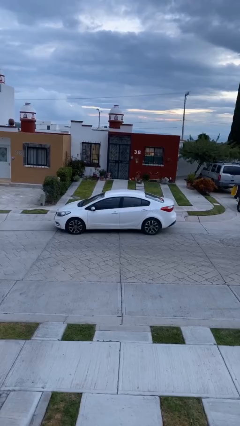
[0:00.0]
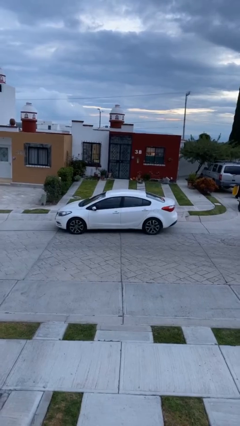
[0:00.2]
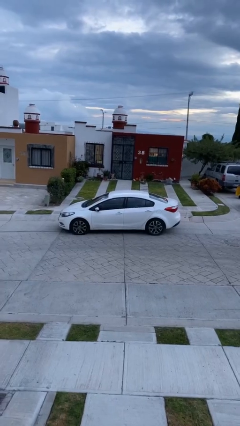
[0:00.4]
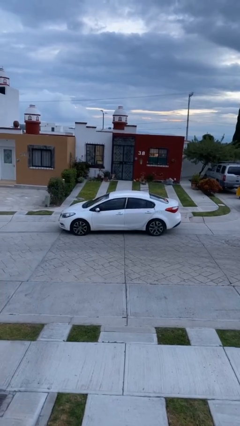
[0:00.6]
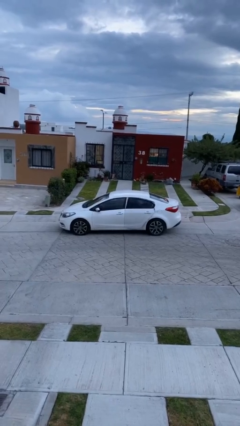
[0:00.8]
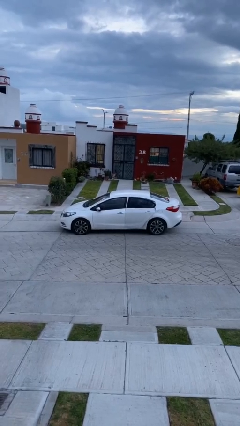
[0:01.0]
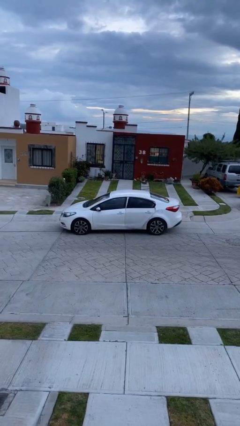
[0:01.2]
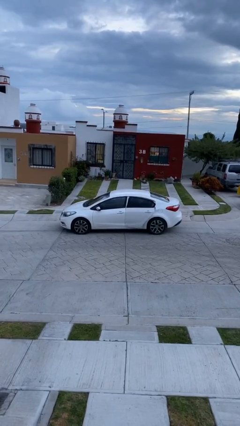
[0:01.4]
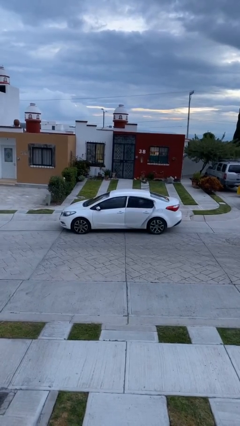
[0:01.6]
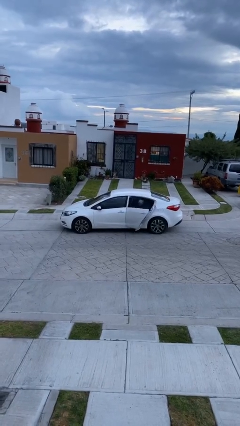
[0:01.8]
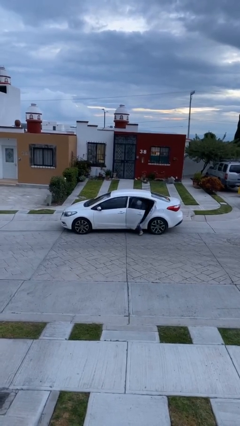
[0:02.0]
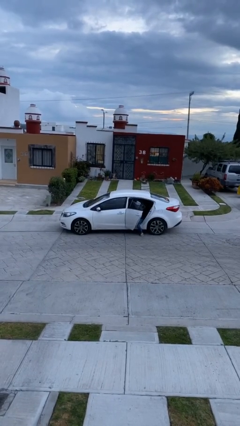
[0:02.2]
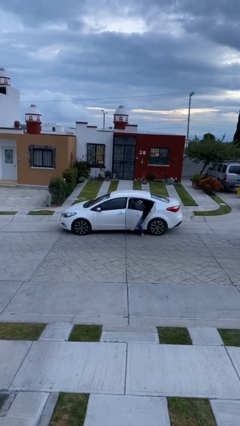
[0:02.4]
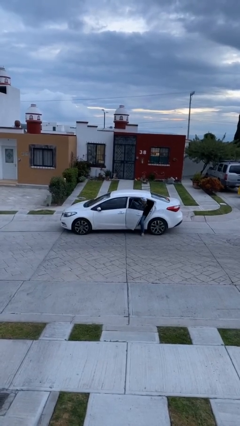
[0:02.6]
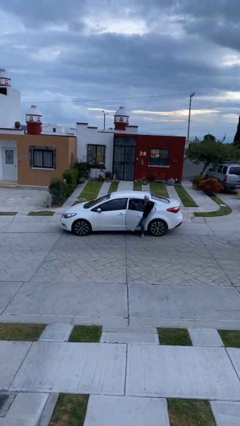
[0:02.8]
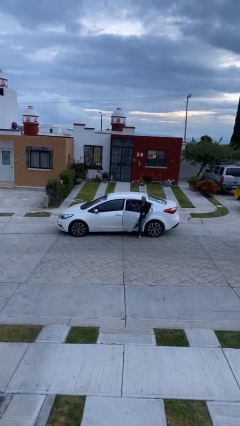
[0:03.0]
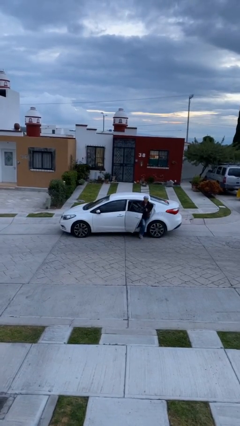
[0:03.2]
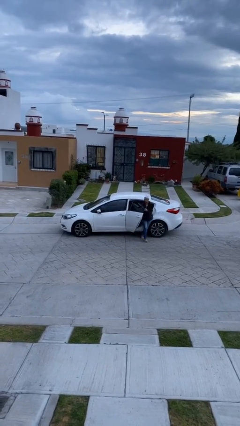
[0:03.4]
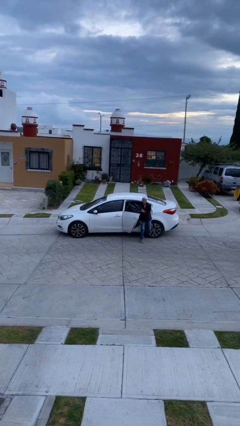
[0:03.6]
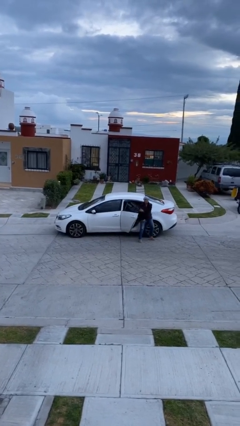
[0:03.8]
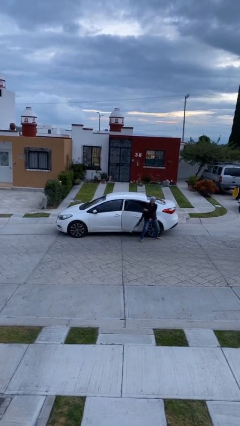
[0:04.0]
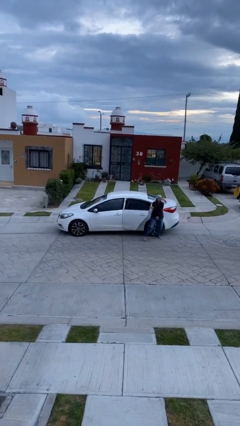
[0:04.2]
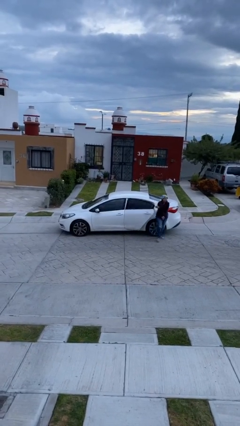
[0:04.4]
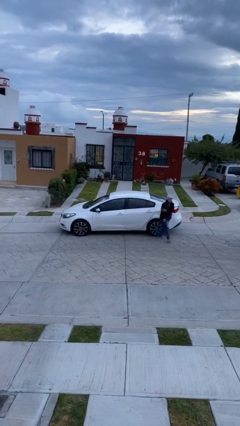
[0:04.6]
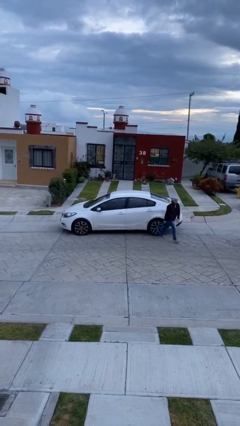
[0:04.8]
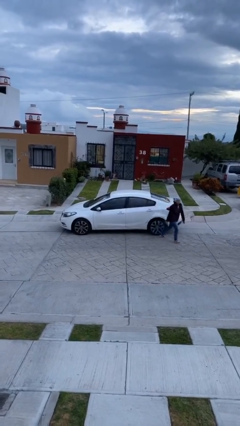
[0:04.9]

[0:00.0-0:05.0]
car drops off person

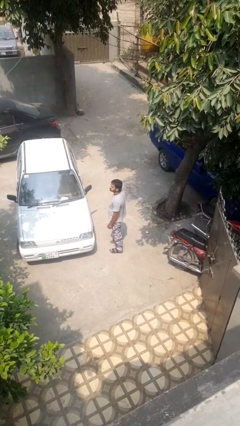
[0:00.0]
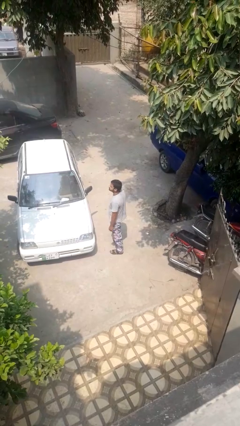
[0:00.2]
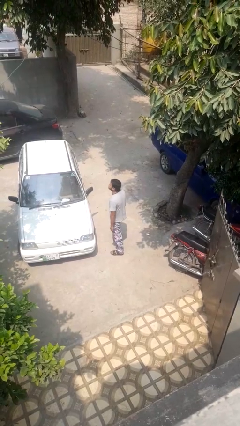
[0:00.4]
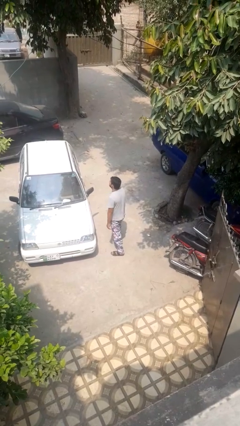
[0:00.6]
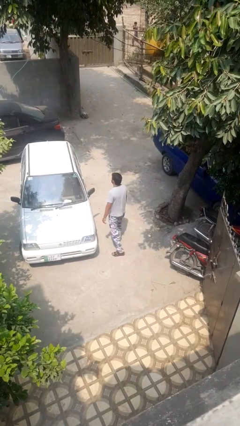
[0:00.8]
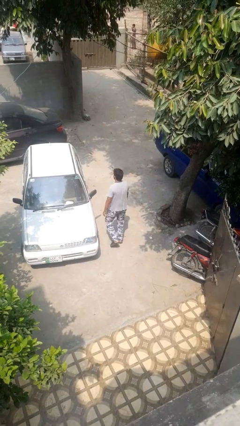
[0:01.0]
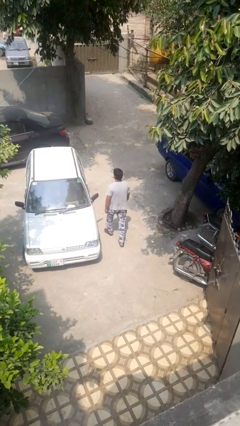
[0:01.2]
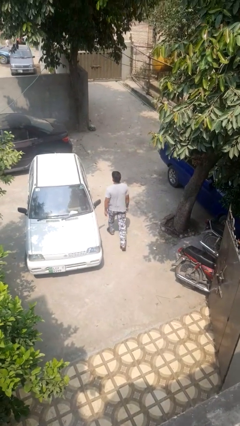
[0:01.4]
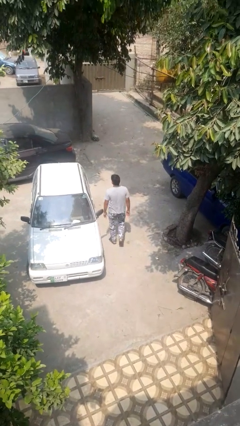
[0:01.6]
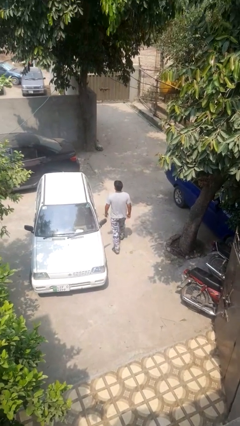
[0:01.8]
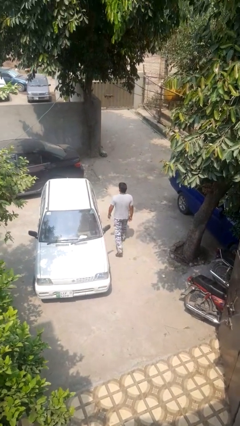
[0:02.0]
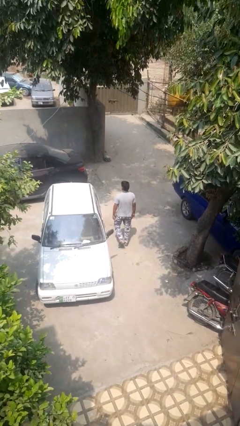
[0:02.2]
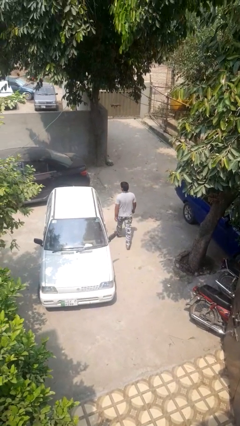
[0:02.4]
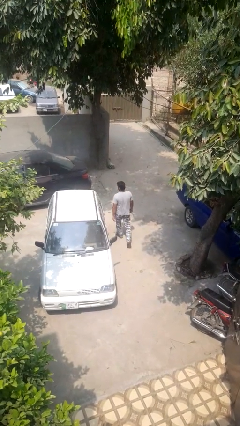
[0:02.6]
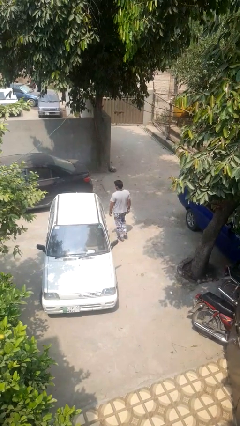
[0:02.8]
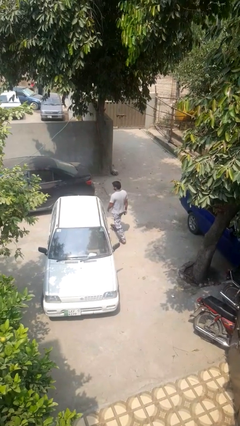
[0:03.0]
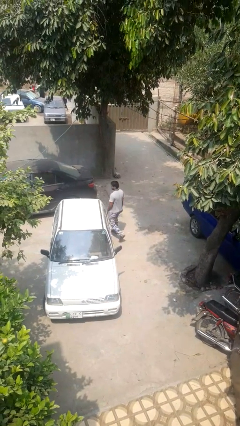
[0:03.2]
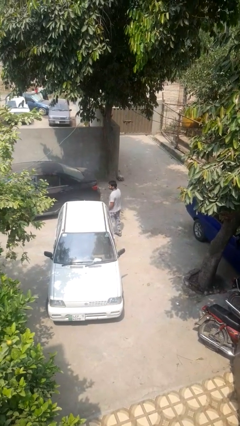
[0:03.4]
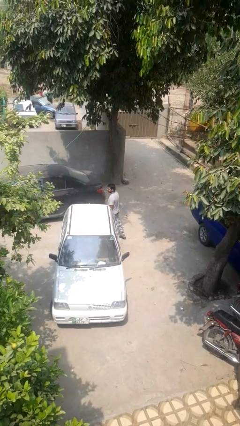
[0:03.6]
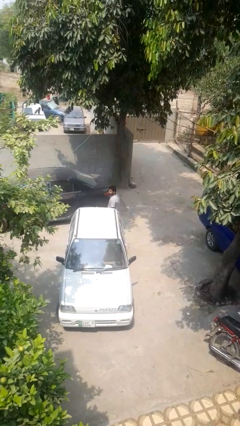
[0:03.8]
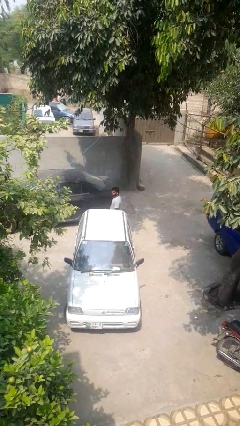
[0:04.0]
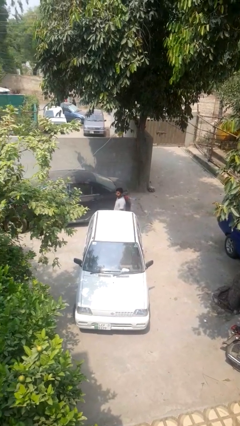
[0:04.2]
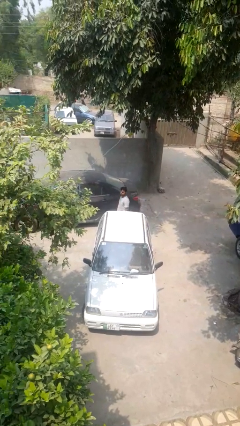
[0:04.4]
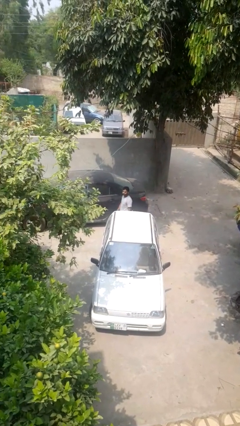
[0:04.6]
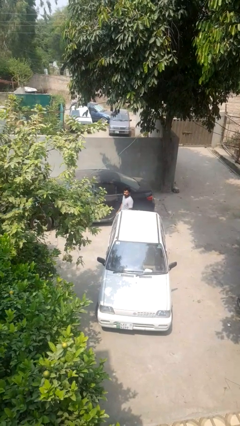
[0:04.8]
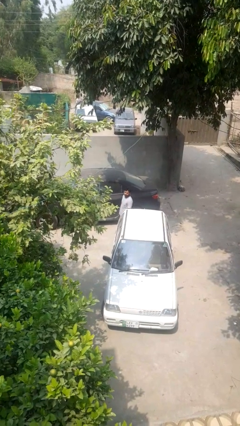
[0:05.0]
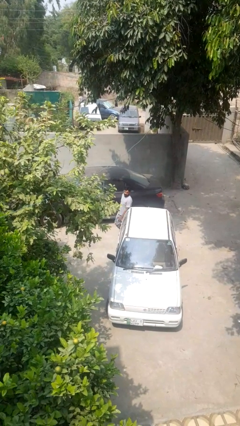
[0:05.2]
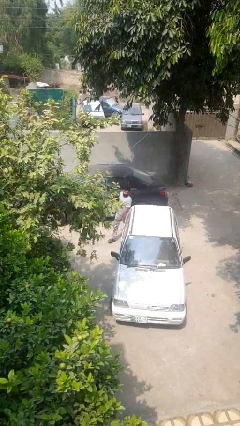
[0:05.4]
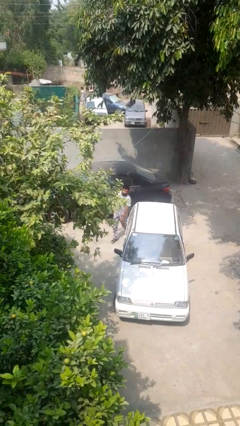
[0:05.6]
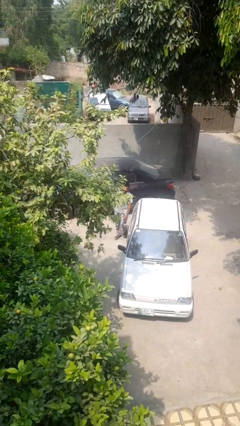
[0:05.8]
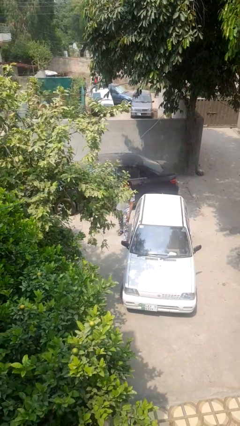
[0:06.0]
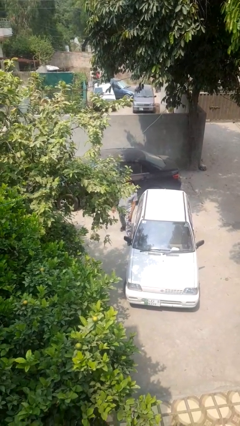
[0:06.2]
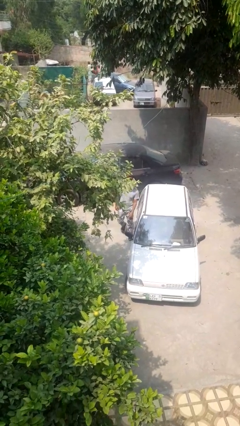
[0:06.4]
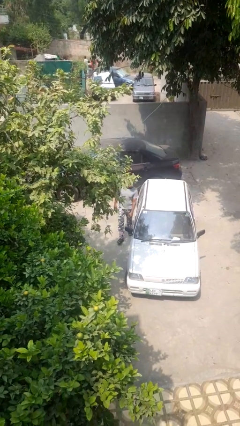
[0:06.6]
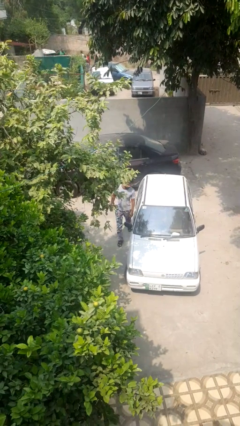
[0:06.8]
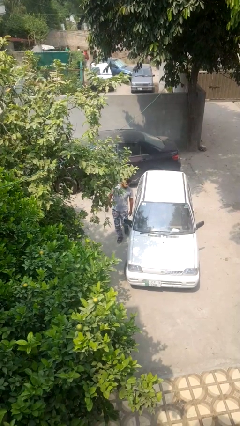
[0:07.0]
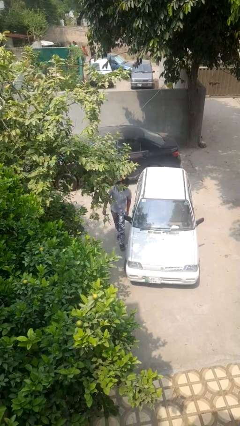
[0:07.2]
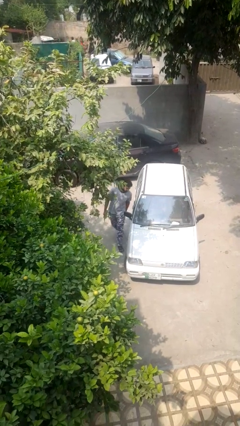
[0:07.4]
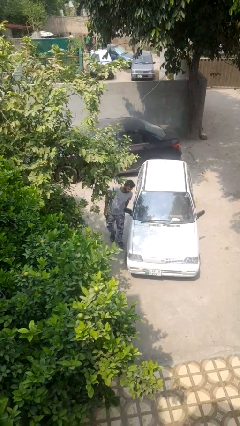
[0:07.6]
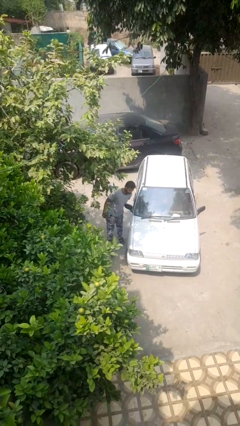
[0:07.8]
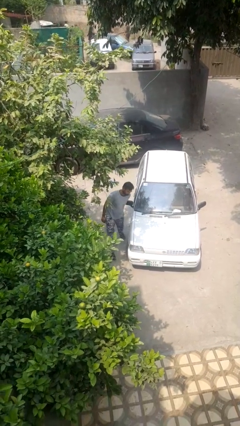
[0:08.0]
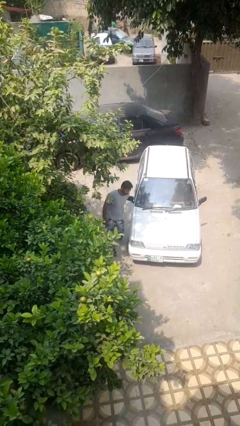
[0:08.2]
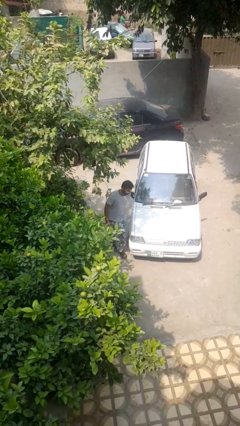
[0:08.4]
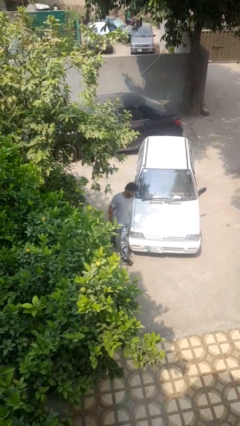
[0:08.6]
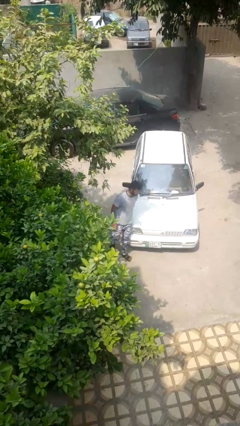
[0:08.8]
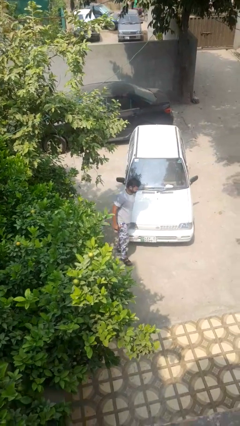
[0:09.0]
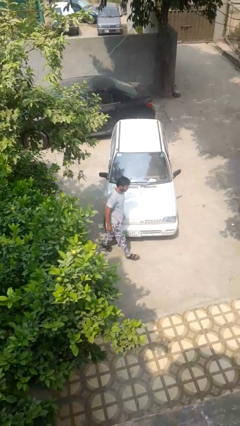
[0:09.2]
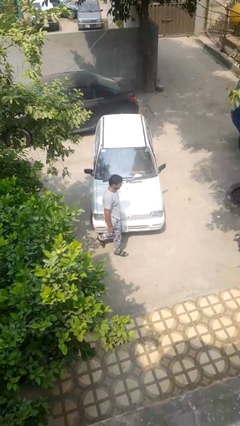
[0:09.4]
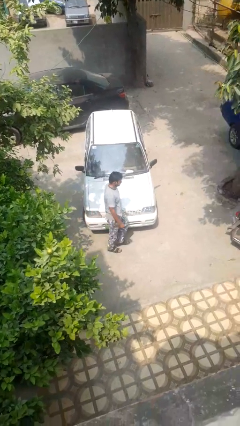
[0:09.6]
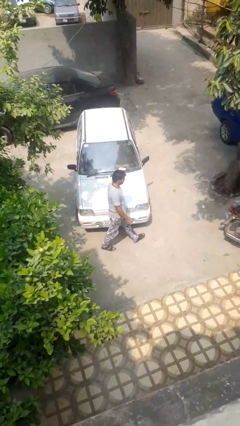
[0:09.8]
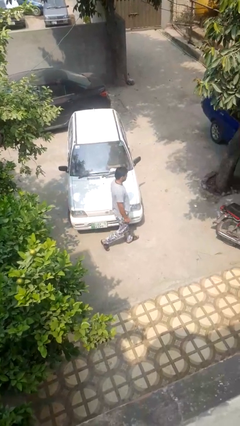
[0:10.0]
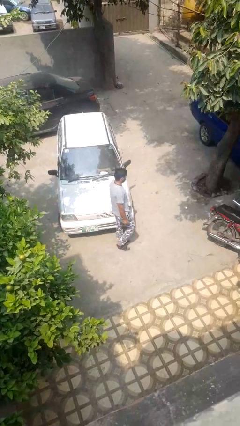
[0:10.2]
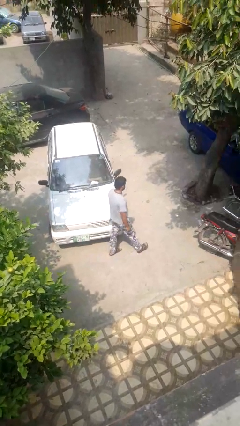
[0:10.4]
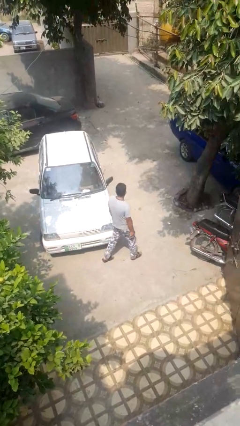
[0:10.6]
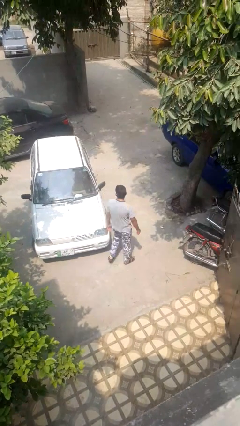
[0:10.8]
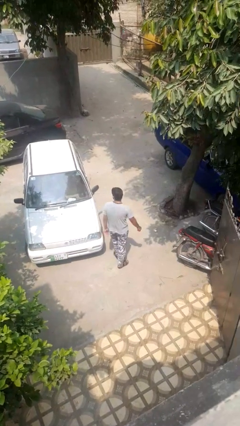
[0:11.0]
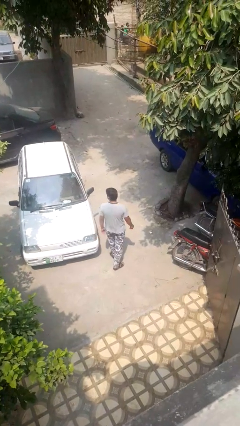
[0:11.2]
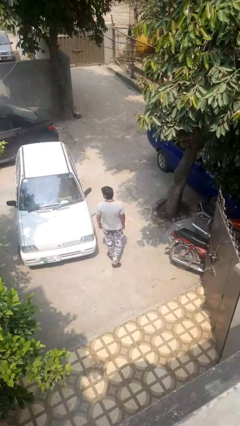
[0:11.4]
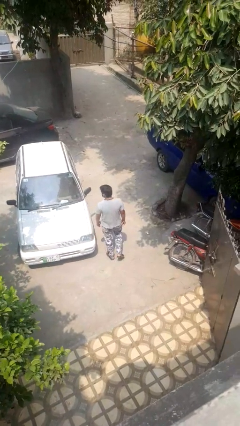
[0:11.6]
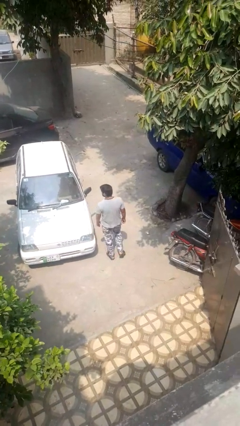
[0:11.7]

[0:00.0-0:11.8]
person walks around car

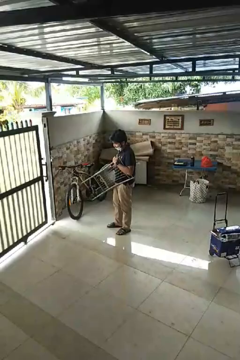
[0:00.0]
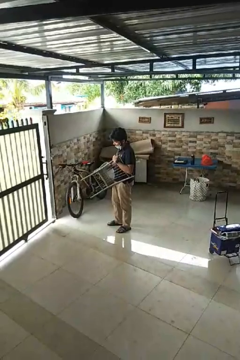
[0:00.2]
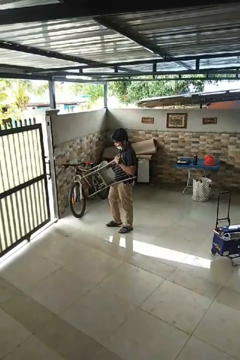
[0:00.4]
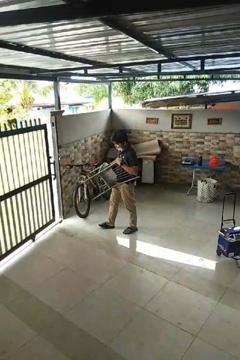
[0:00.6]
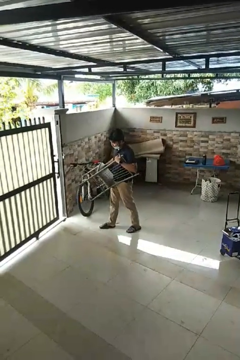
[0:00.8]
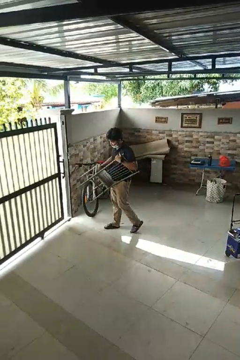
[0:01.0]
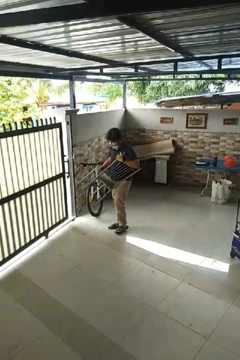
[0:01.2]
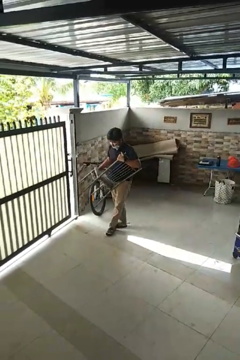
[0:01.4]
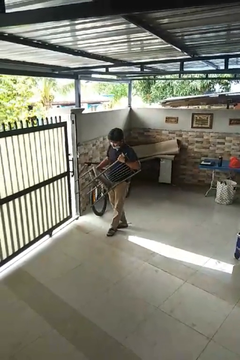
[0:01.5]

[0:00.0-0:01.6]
person carries furniture
